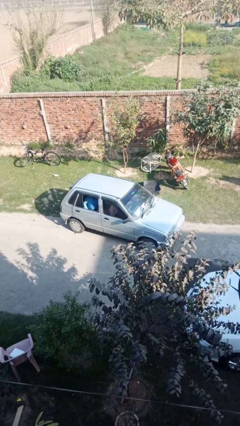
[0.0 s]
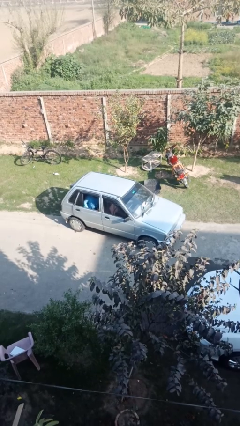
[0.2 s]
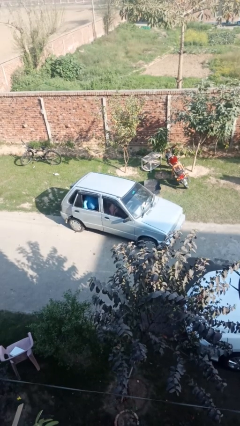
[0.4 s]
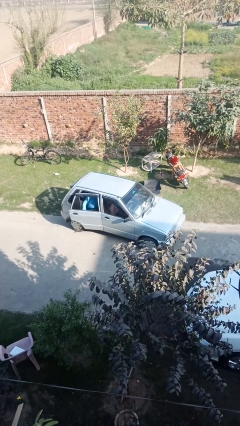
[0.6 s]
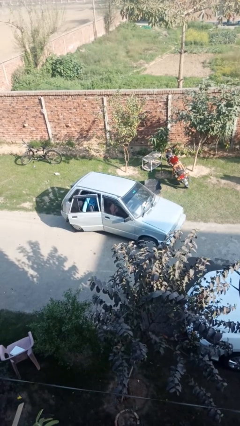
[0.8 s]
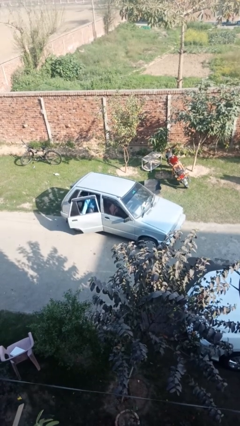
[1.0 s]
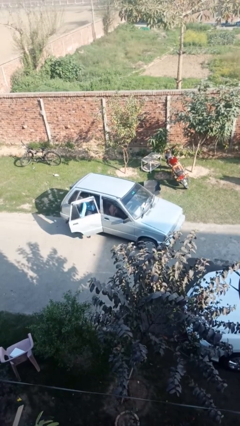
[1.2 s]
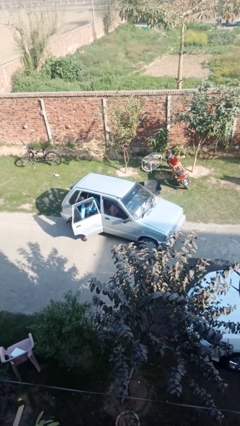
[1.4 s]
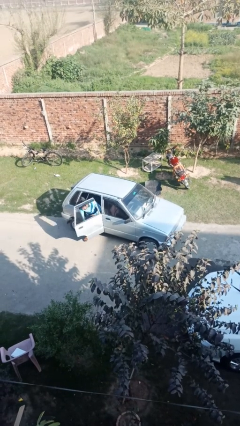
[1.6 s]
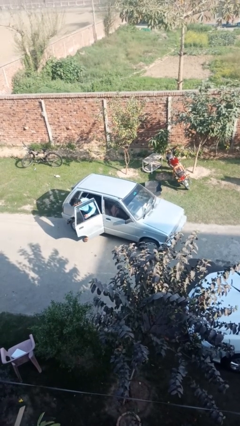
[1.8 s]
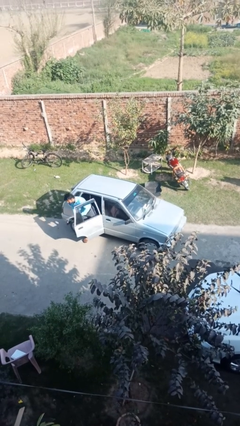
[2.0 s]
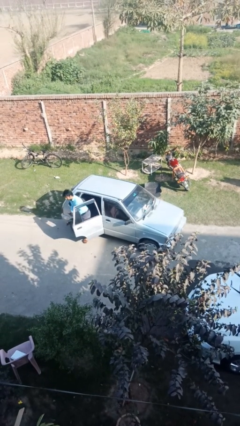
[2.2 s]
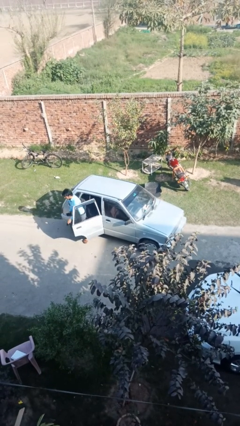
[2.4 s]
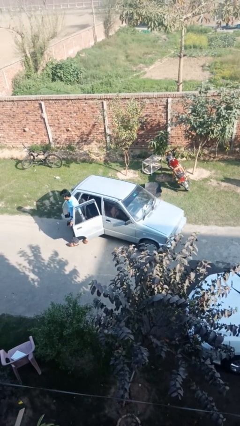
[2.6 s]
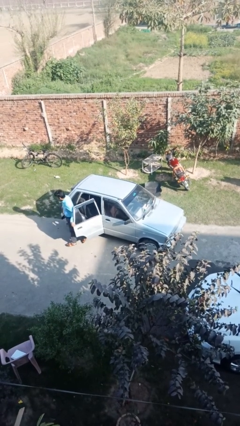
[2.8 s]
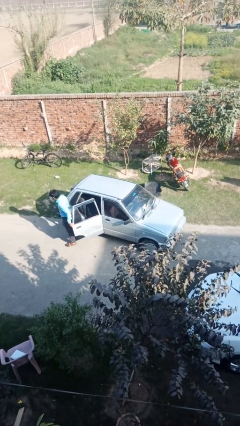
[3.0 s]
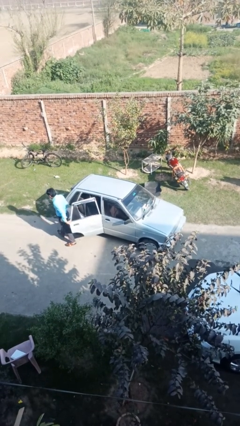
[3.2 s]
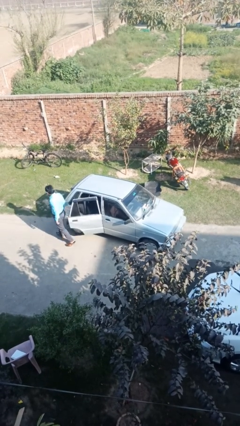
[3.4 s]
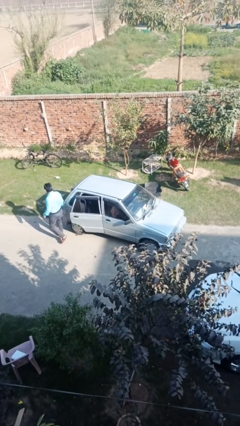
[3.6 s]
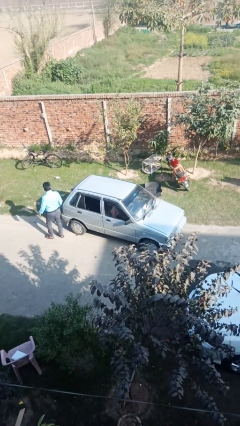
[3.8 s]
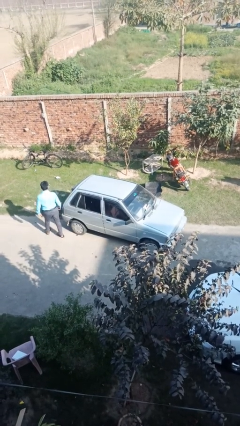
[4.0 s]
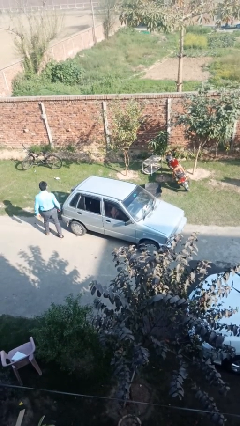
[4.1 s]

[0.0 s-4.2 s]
car drops off person

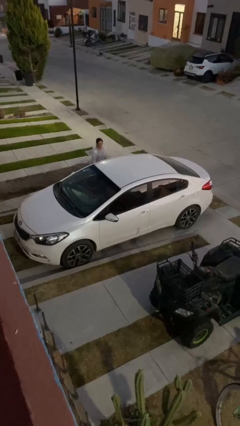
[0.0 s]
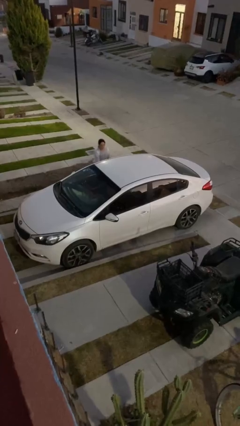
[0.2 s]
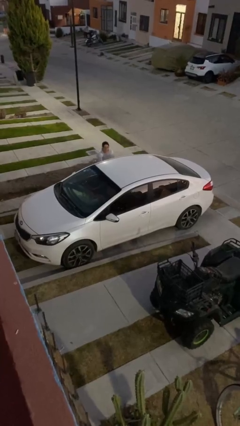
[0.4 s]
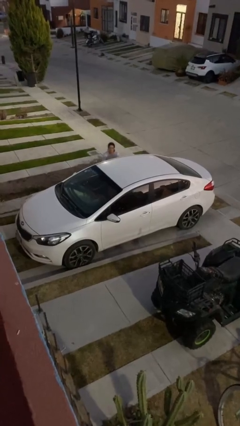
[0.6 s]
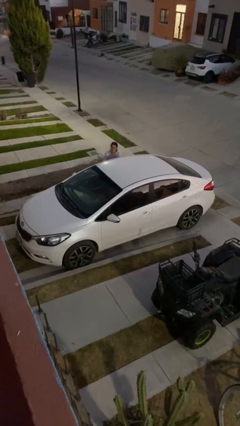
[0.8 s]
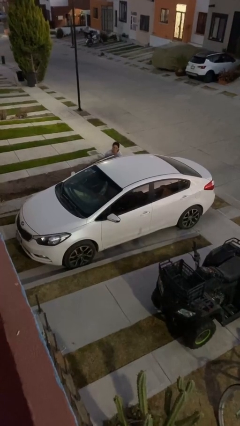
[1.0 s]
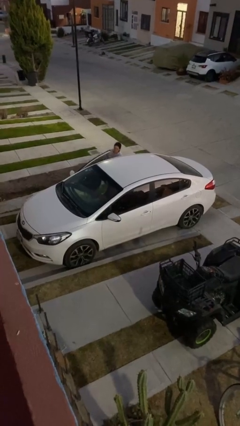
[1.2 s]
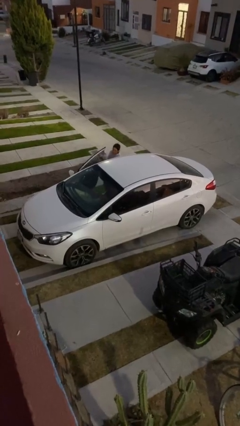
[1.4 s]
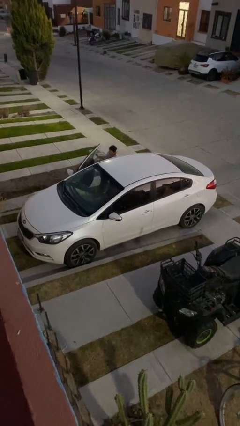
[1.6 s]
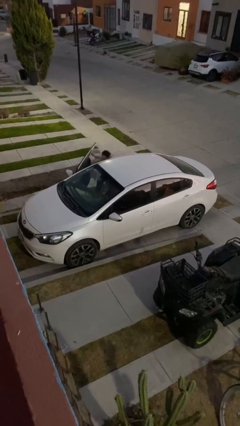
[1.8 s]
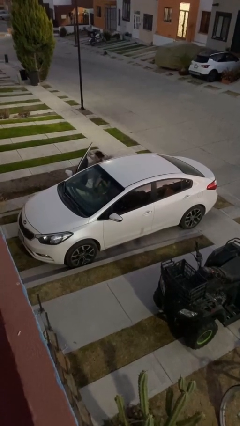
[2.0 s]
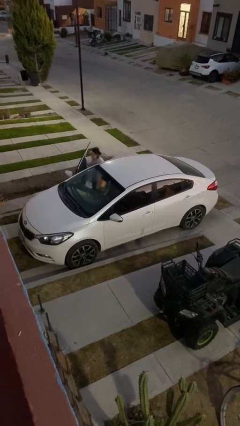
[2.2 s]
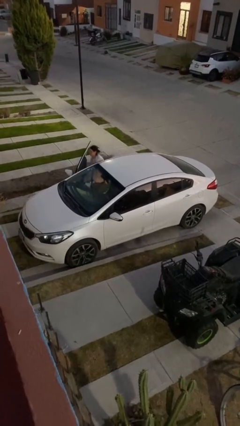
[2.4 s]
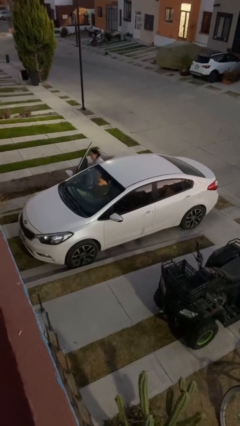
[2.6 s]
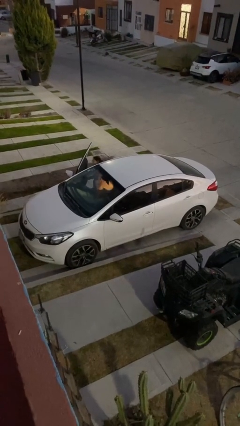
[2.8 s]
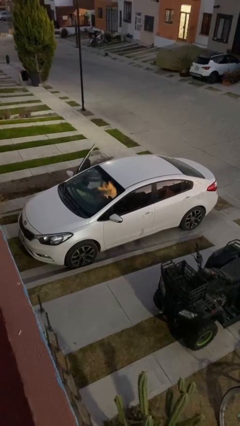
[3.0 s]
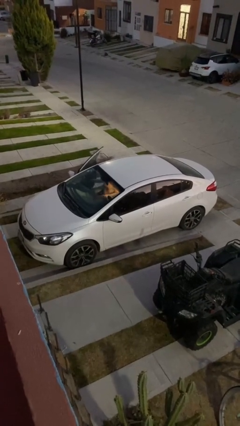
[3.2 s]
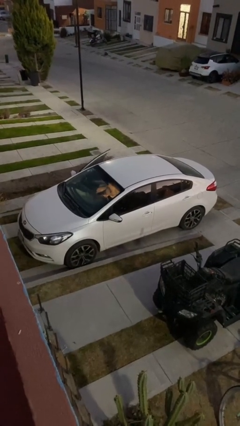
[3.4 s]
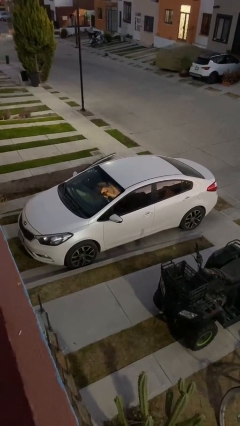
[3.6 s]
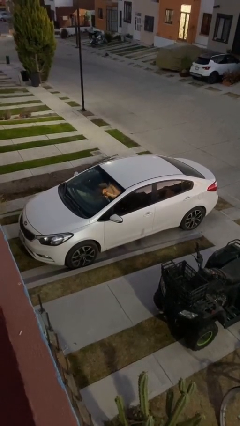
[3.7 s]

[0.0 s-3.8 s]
car picks up person

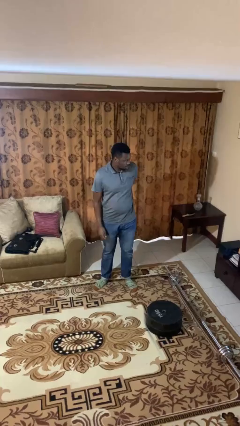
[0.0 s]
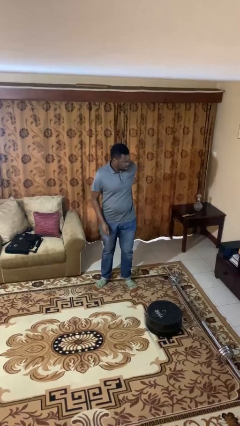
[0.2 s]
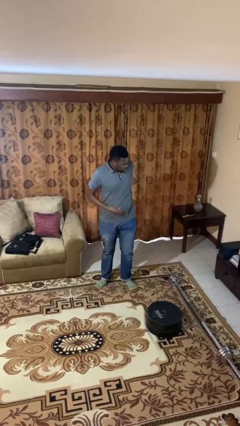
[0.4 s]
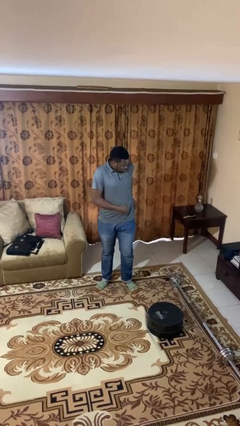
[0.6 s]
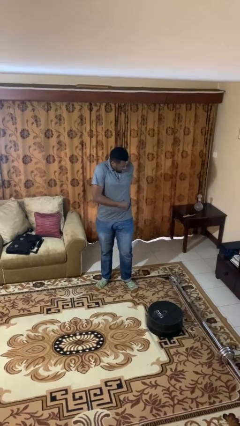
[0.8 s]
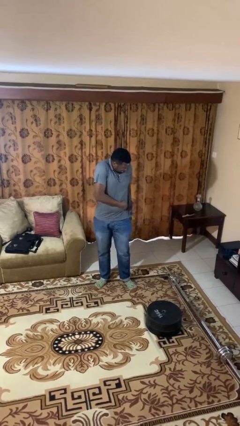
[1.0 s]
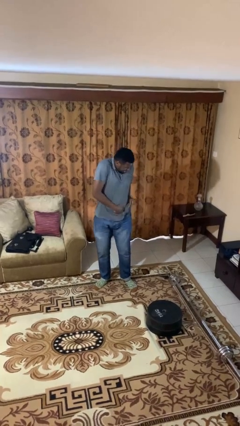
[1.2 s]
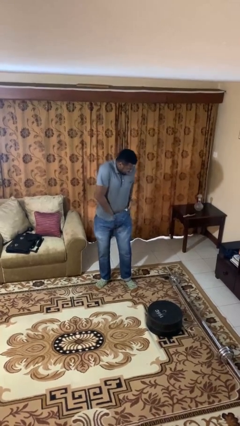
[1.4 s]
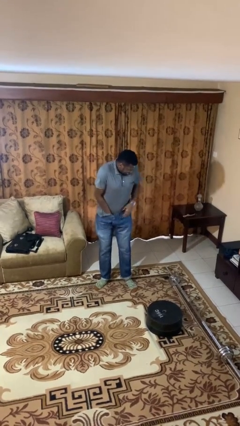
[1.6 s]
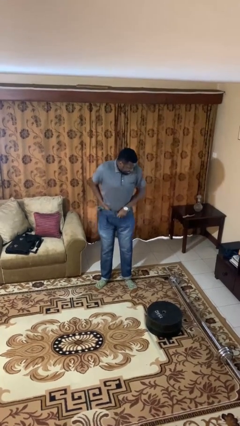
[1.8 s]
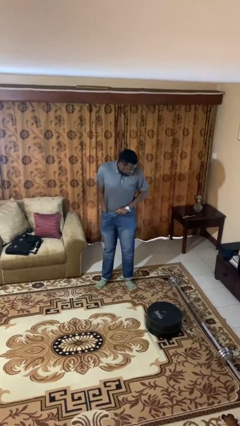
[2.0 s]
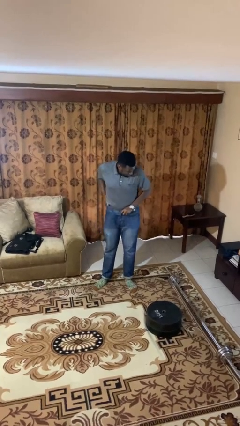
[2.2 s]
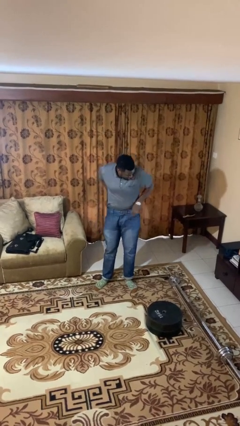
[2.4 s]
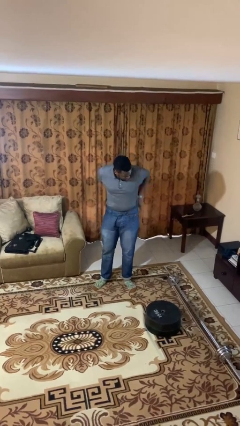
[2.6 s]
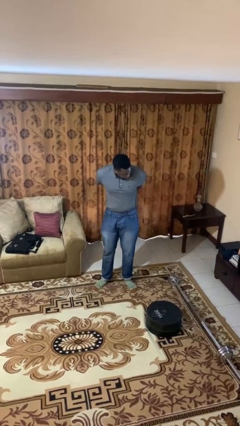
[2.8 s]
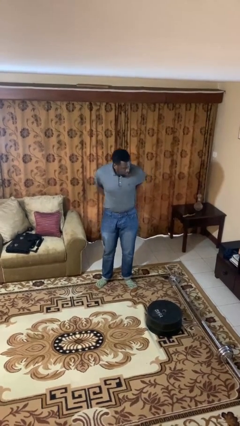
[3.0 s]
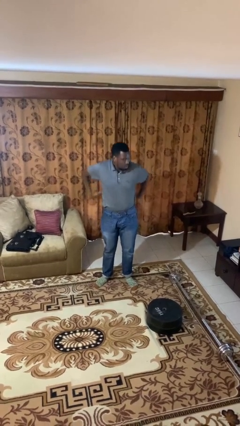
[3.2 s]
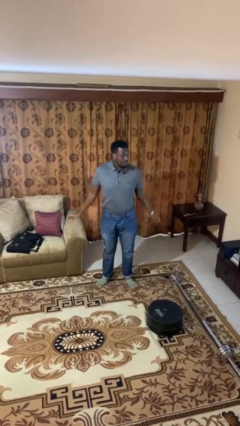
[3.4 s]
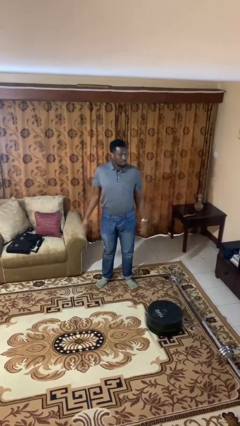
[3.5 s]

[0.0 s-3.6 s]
person tucks in shirt

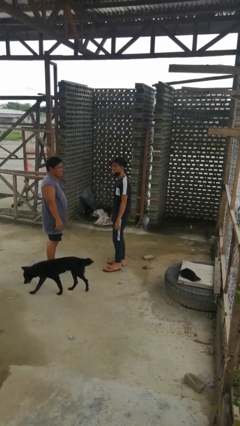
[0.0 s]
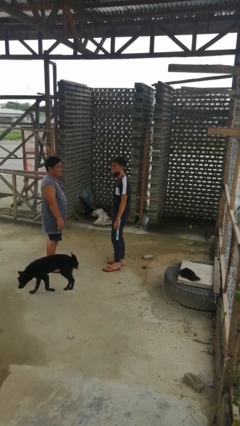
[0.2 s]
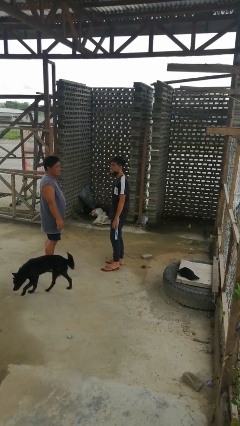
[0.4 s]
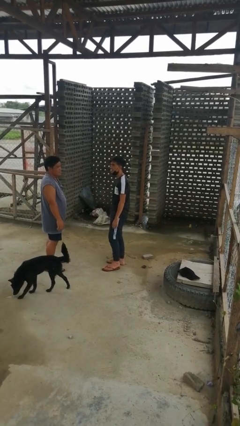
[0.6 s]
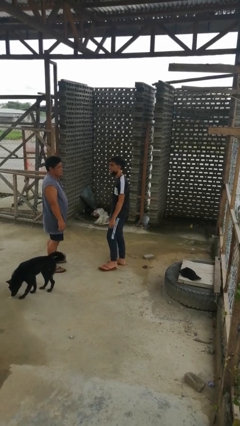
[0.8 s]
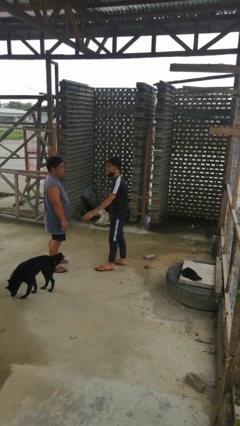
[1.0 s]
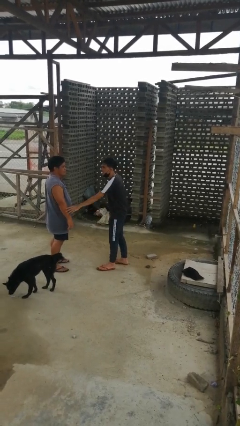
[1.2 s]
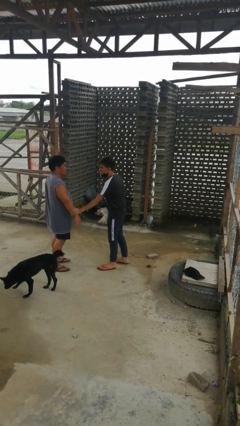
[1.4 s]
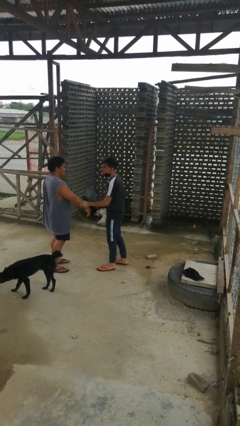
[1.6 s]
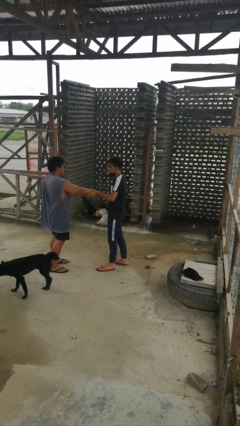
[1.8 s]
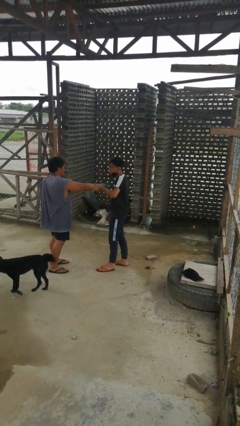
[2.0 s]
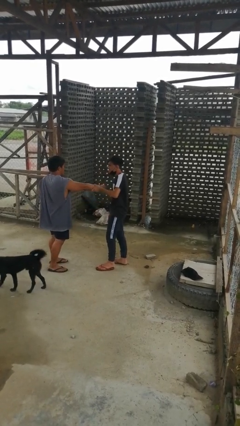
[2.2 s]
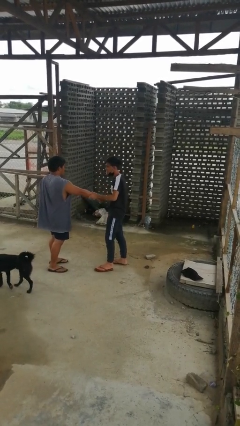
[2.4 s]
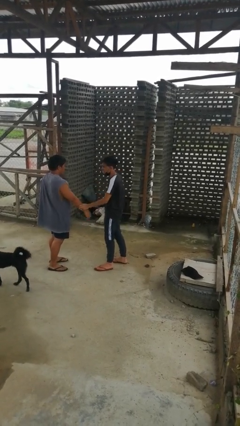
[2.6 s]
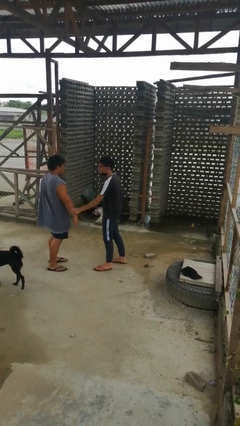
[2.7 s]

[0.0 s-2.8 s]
person grabs person by forearm

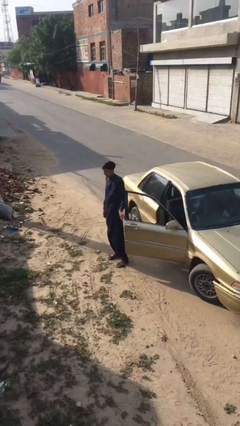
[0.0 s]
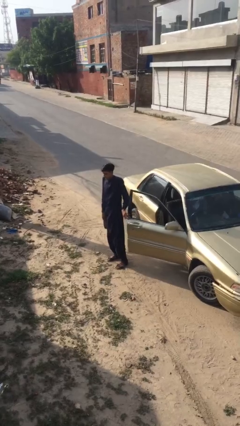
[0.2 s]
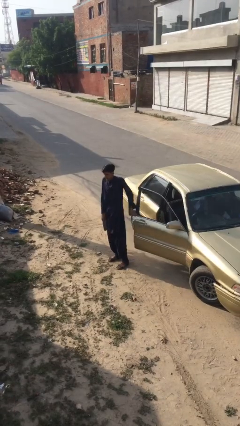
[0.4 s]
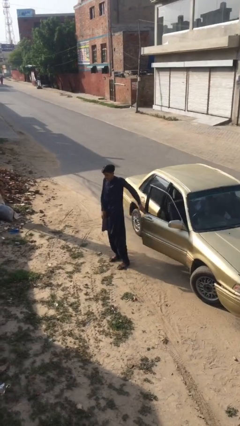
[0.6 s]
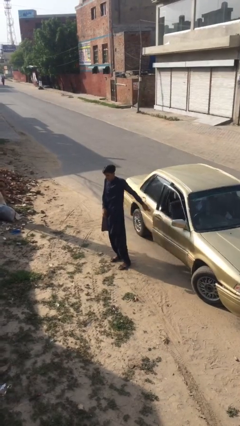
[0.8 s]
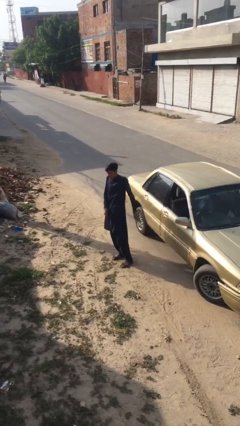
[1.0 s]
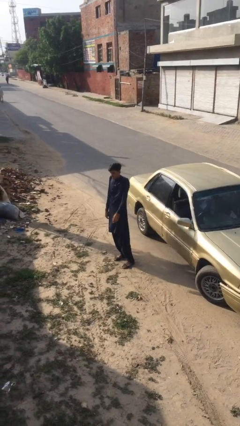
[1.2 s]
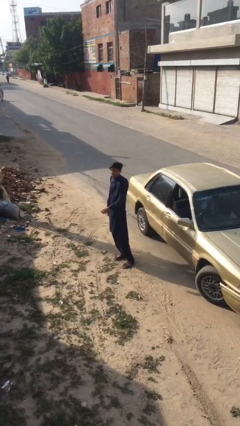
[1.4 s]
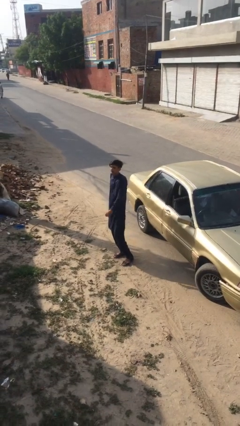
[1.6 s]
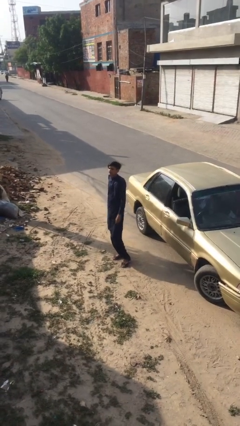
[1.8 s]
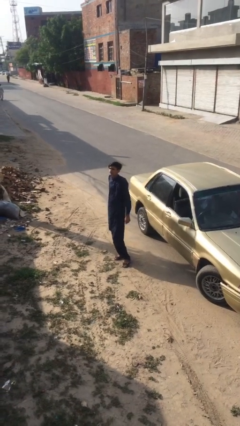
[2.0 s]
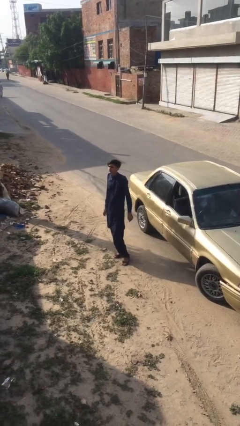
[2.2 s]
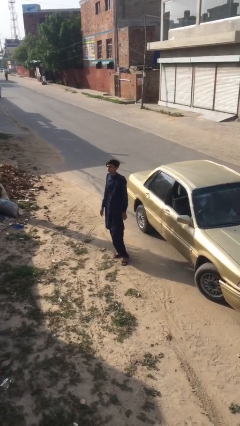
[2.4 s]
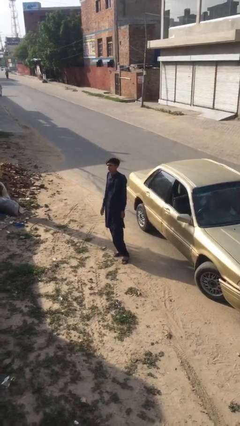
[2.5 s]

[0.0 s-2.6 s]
person closes car door
